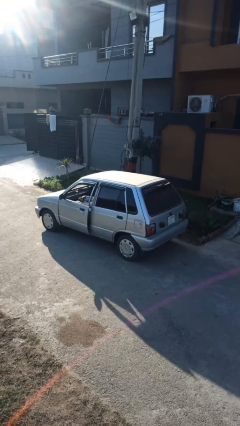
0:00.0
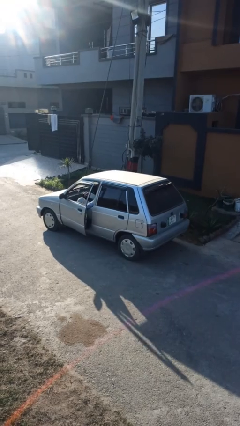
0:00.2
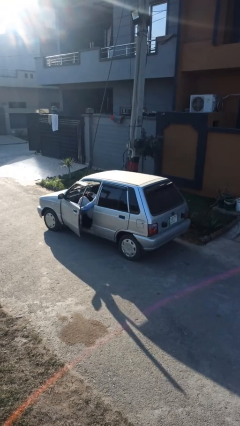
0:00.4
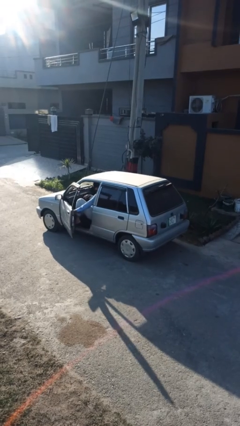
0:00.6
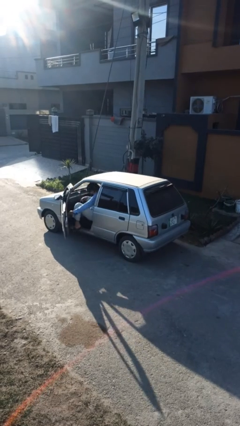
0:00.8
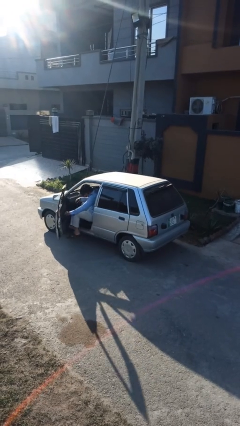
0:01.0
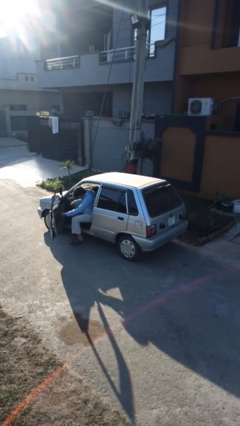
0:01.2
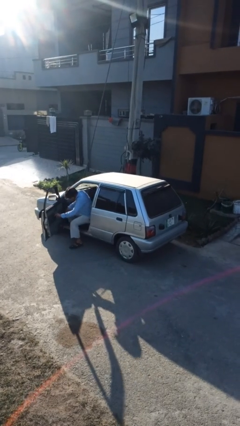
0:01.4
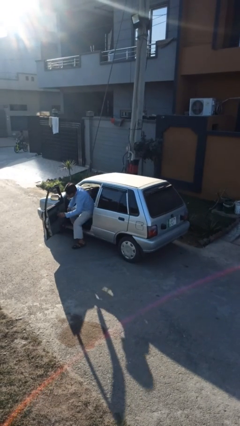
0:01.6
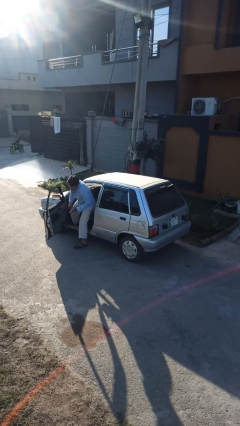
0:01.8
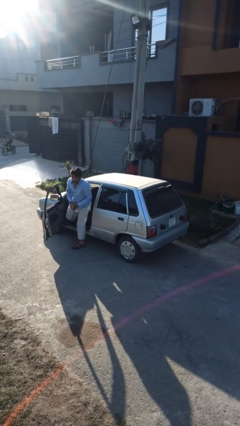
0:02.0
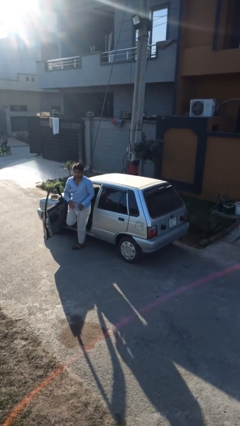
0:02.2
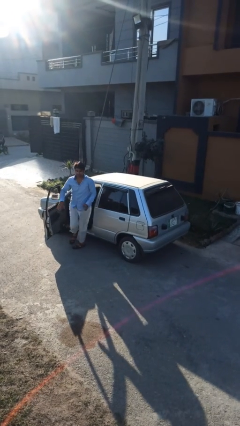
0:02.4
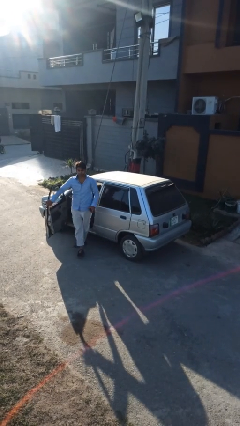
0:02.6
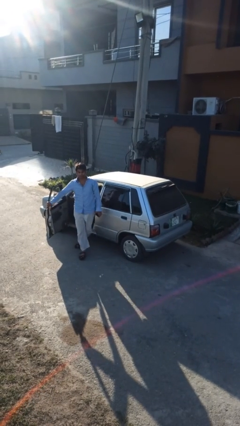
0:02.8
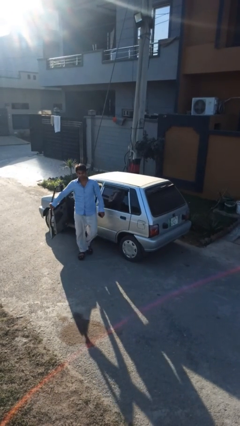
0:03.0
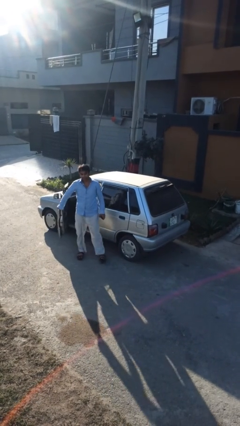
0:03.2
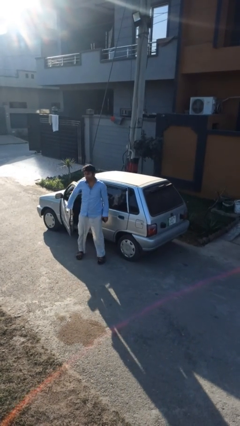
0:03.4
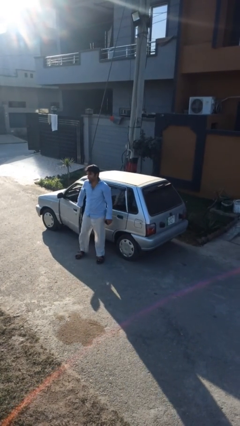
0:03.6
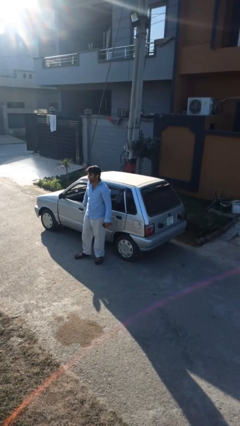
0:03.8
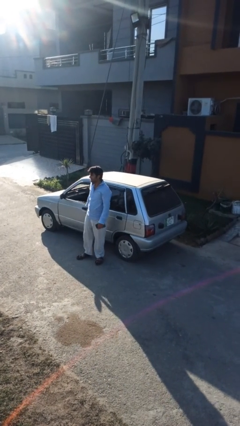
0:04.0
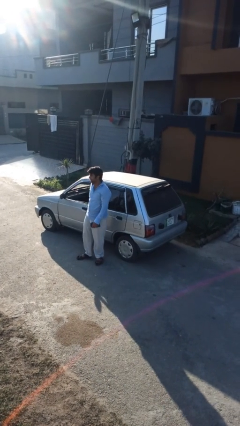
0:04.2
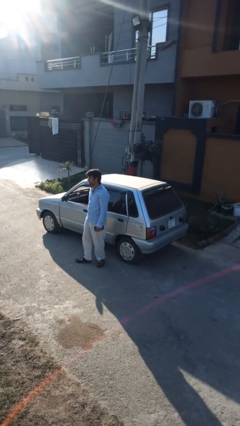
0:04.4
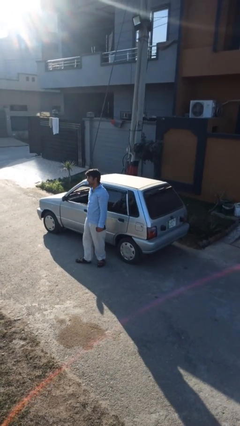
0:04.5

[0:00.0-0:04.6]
car drops off person

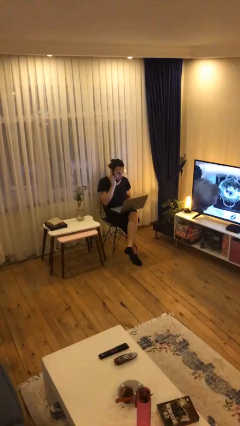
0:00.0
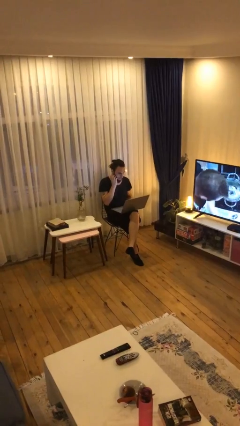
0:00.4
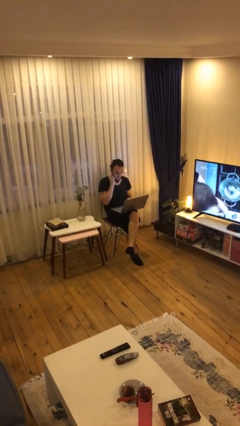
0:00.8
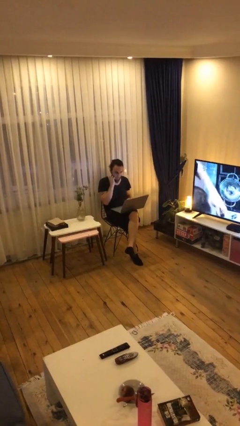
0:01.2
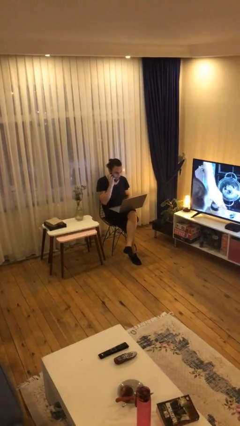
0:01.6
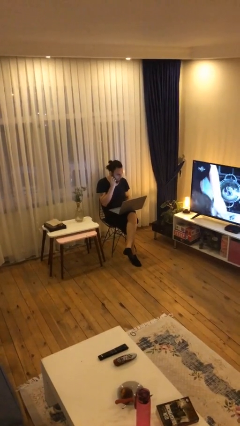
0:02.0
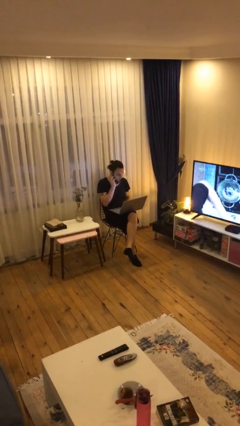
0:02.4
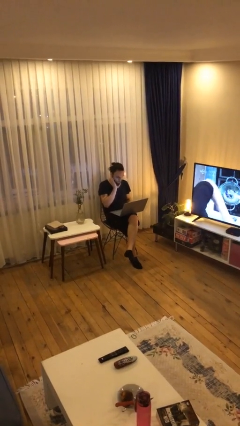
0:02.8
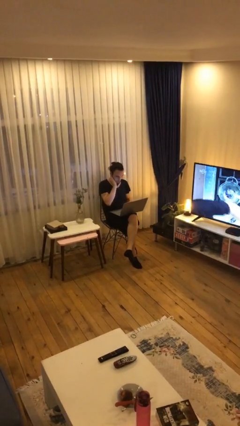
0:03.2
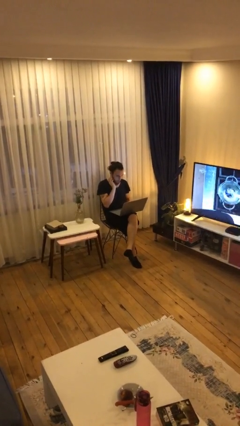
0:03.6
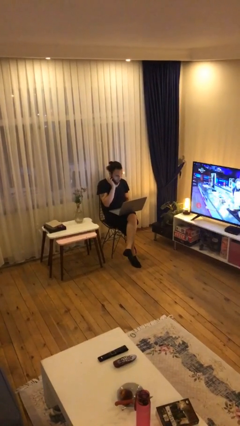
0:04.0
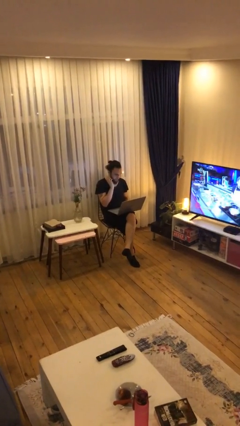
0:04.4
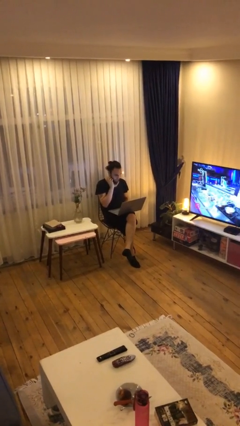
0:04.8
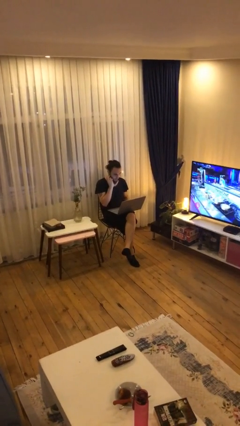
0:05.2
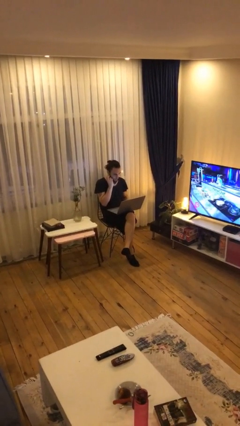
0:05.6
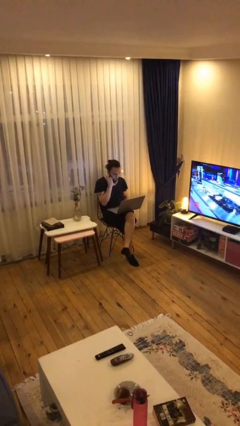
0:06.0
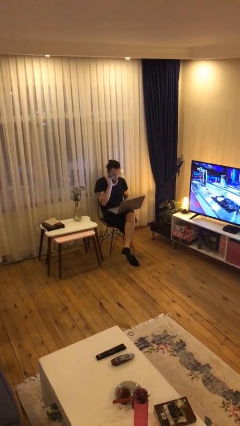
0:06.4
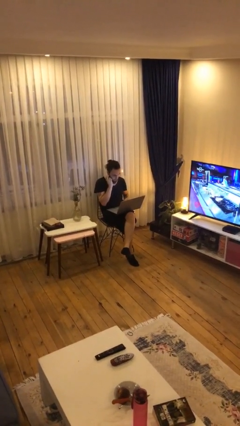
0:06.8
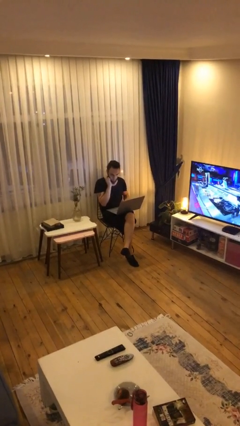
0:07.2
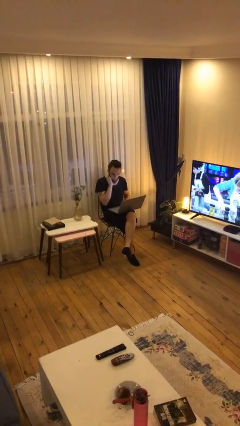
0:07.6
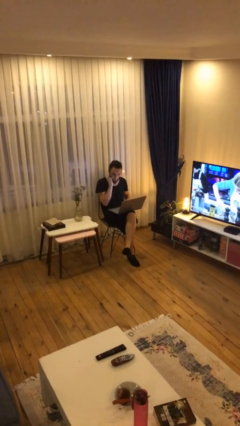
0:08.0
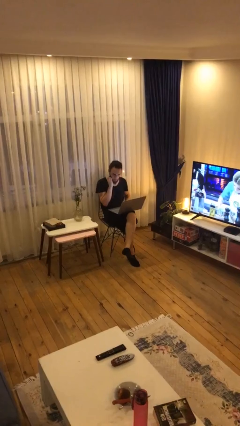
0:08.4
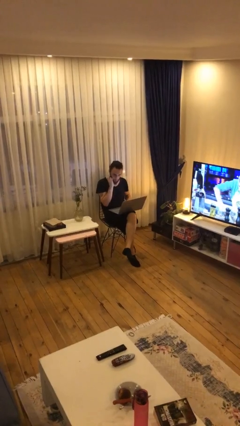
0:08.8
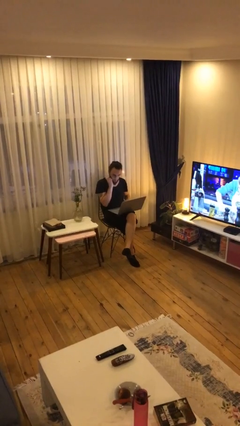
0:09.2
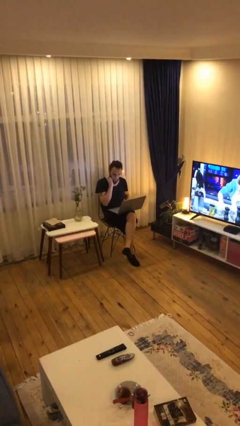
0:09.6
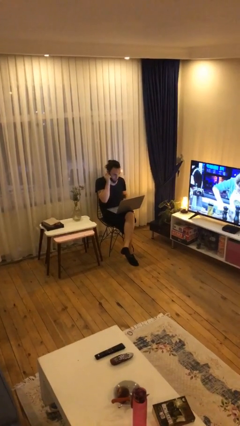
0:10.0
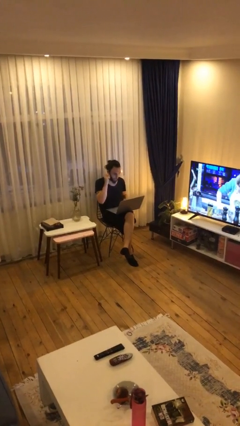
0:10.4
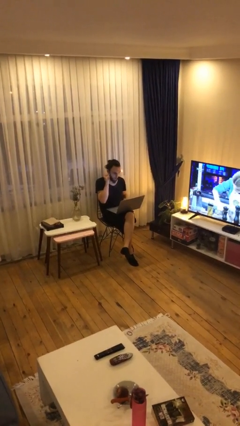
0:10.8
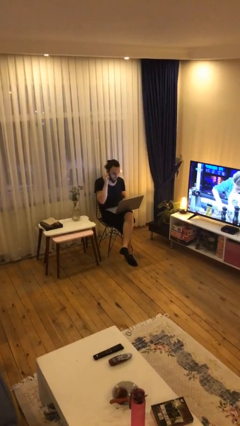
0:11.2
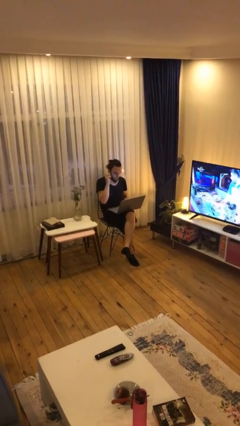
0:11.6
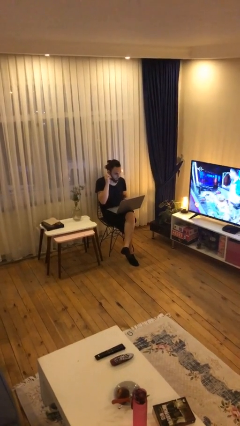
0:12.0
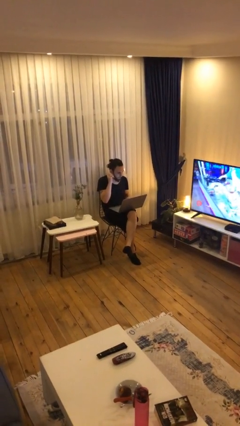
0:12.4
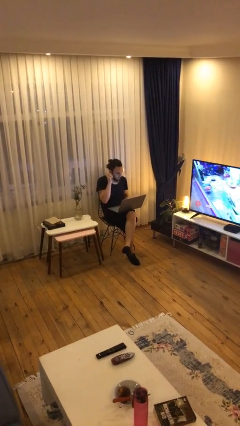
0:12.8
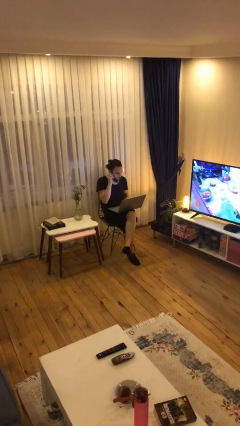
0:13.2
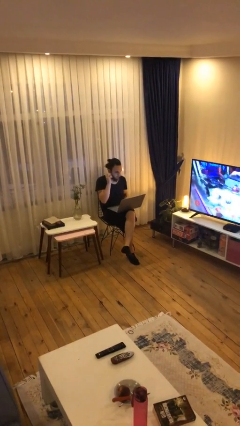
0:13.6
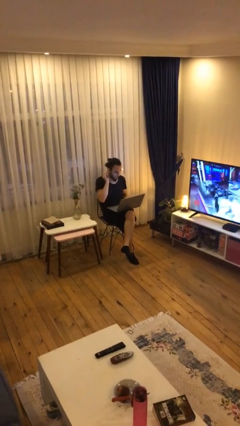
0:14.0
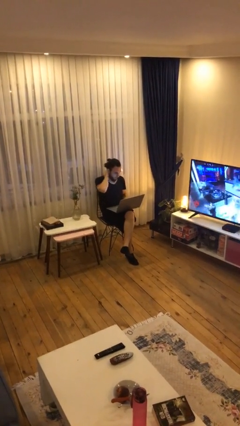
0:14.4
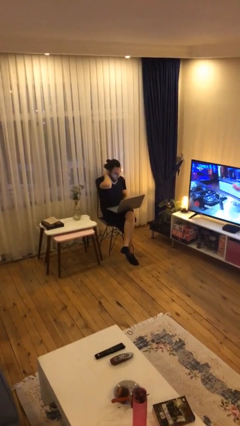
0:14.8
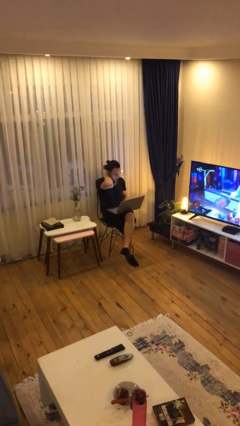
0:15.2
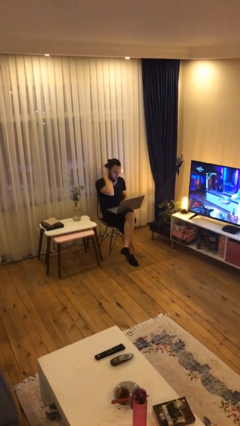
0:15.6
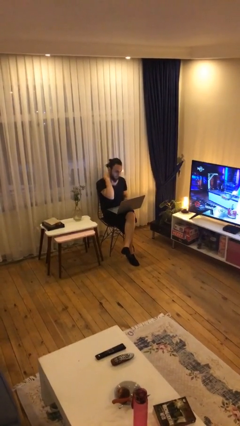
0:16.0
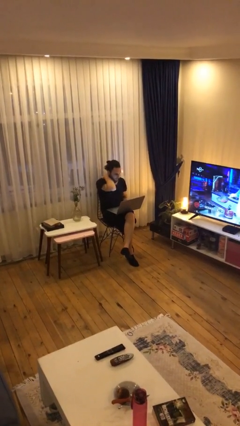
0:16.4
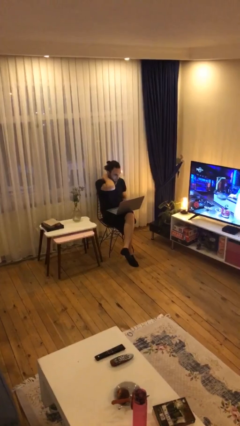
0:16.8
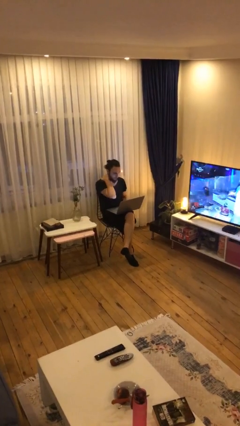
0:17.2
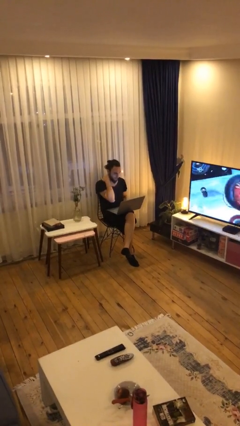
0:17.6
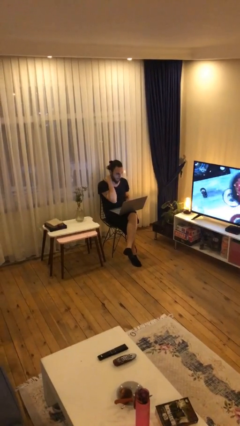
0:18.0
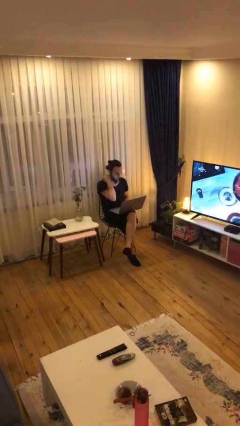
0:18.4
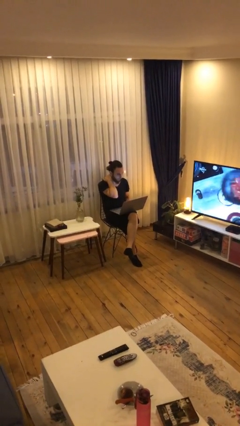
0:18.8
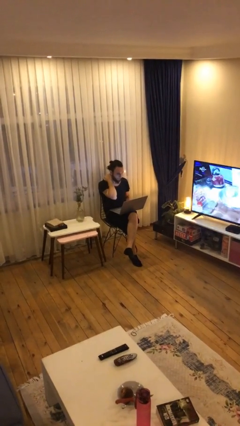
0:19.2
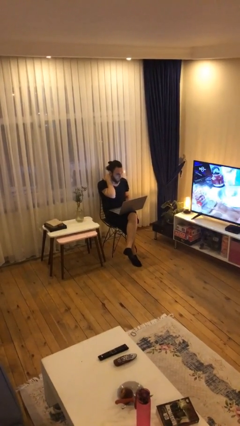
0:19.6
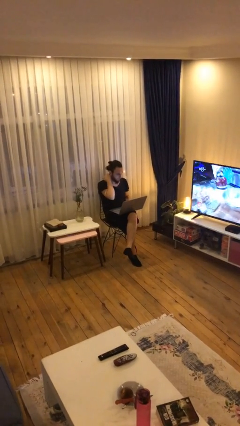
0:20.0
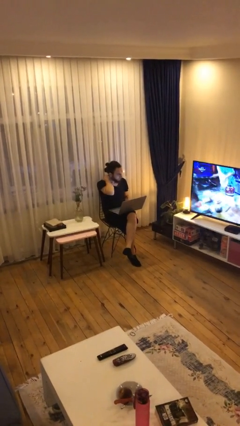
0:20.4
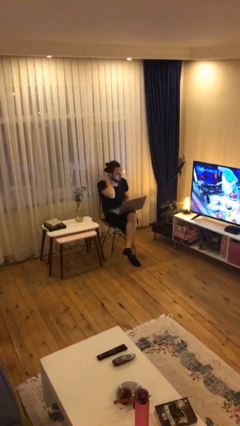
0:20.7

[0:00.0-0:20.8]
person interacts with laptop

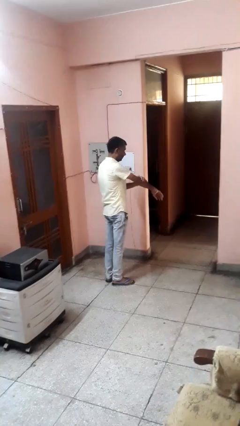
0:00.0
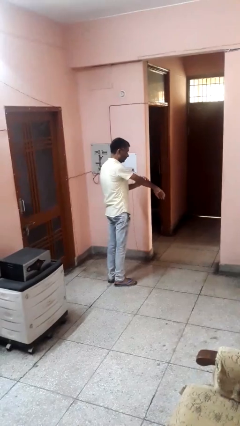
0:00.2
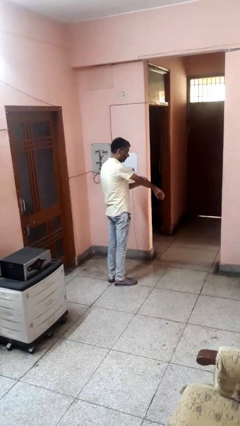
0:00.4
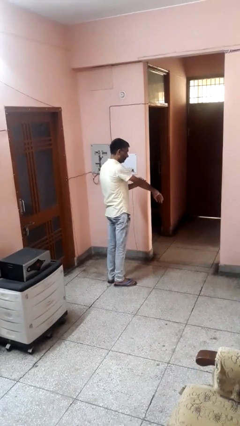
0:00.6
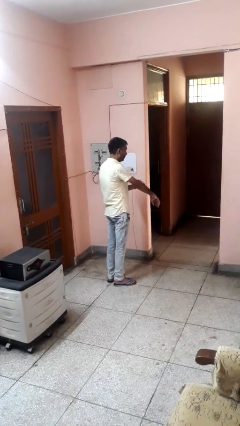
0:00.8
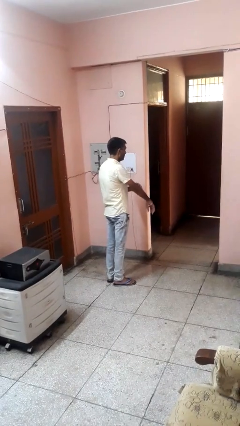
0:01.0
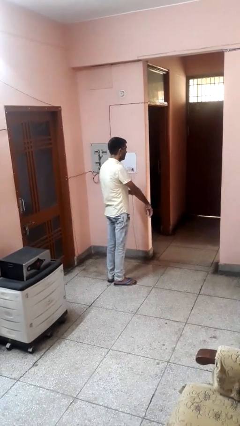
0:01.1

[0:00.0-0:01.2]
person swats bug

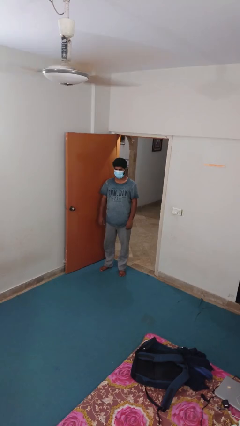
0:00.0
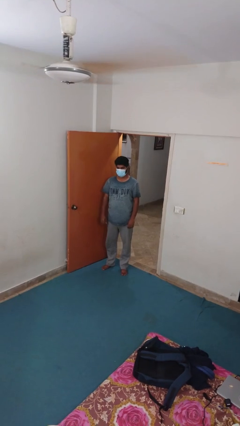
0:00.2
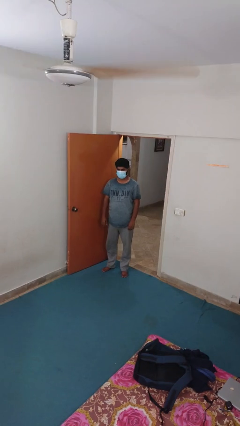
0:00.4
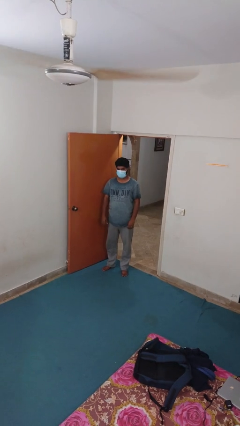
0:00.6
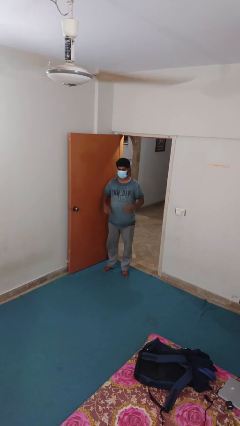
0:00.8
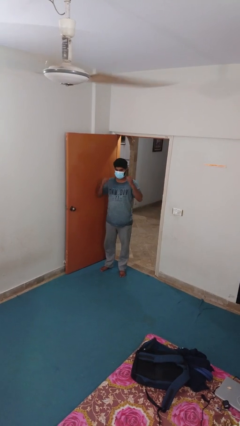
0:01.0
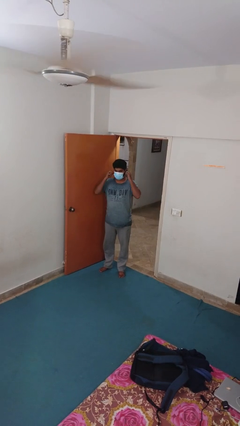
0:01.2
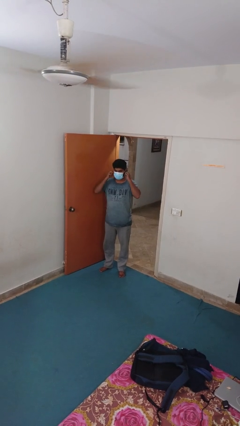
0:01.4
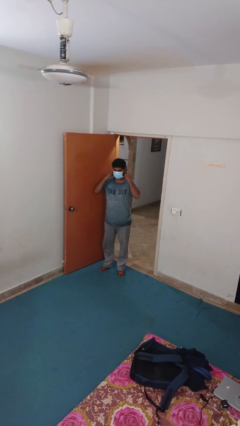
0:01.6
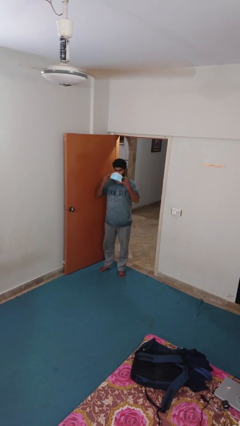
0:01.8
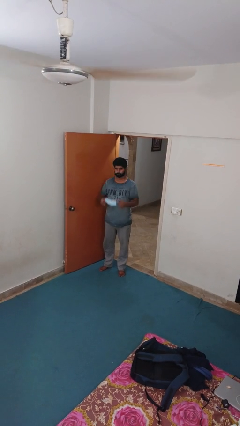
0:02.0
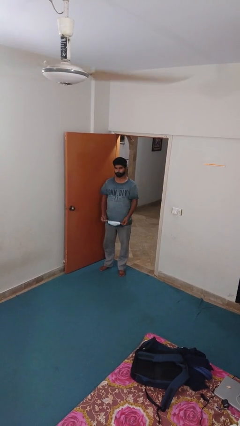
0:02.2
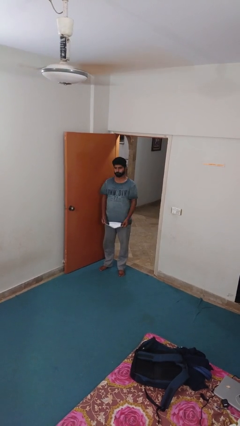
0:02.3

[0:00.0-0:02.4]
person takes off facemask
